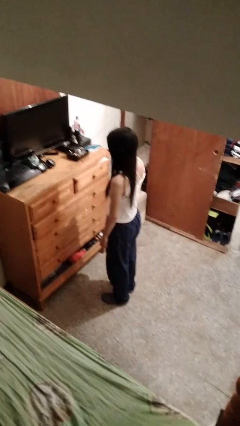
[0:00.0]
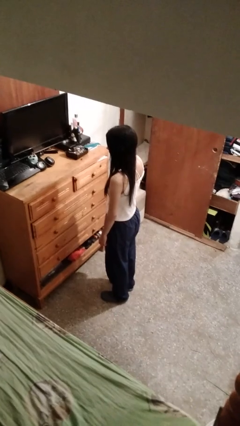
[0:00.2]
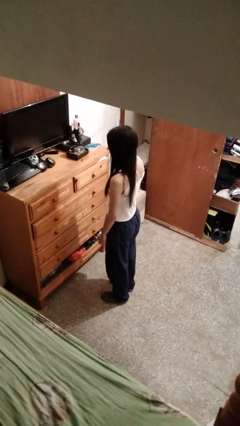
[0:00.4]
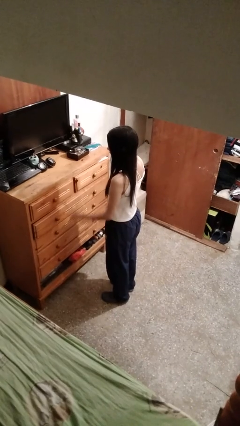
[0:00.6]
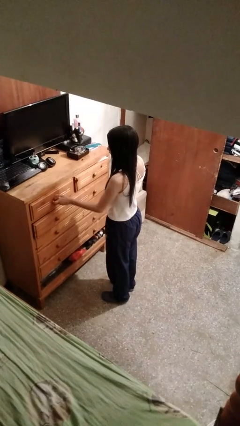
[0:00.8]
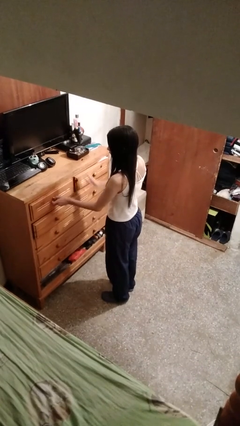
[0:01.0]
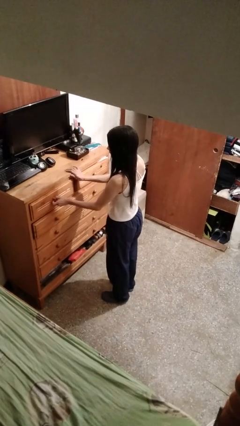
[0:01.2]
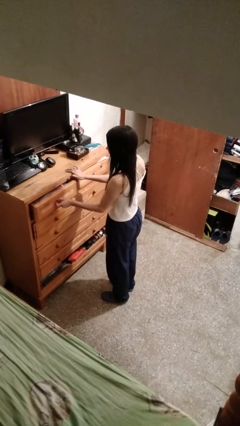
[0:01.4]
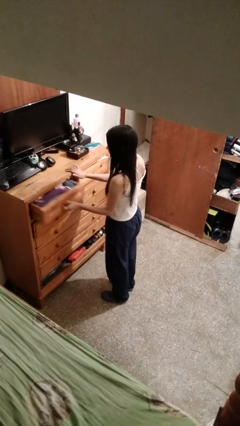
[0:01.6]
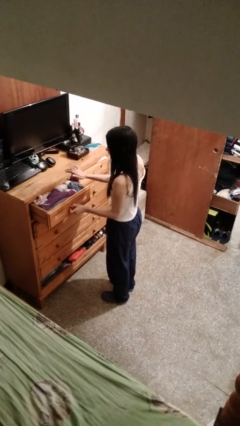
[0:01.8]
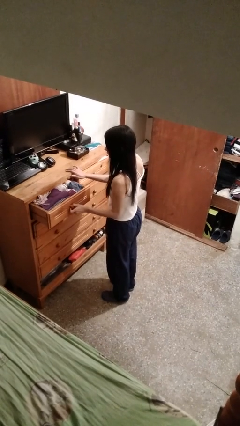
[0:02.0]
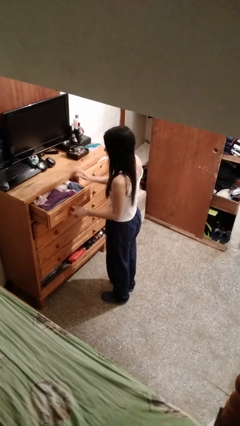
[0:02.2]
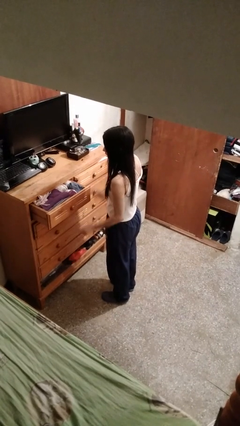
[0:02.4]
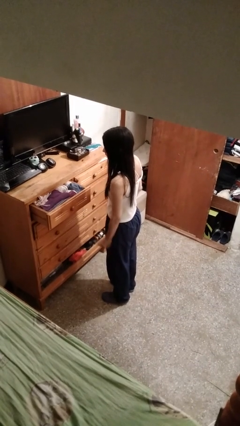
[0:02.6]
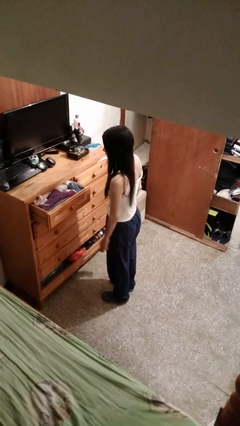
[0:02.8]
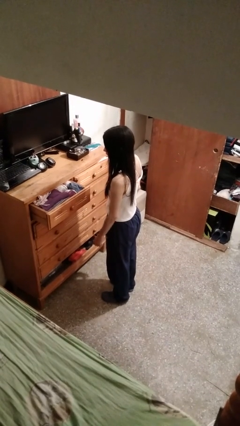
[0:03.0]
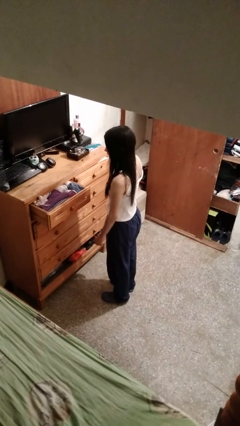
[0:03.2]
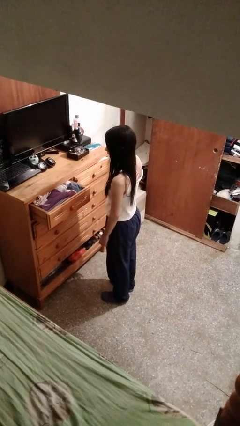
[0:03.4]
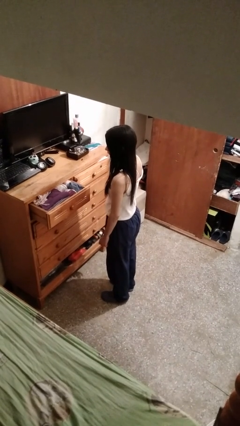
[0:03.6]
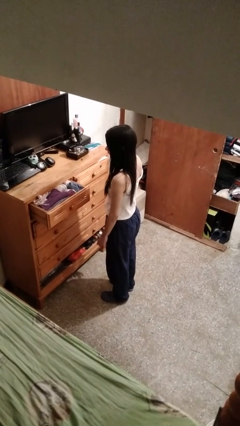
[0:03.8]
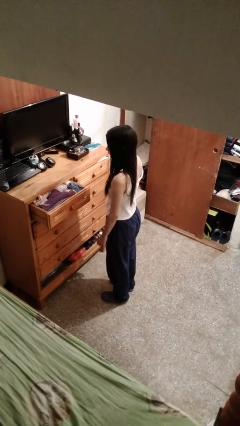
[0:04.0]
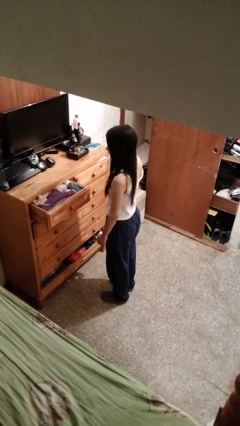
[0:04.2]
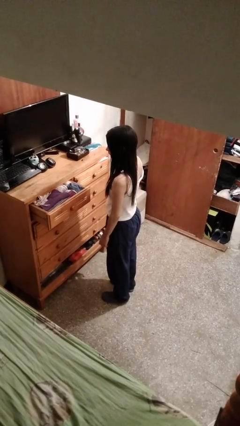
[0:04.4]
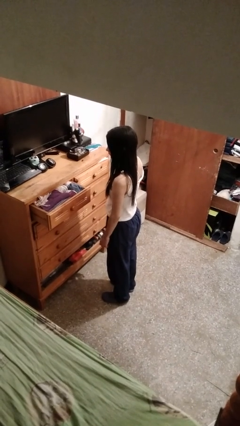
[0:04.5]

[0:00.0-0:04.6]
person opens dresser drawer

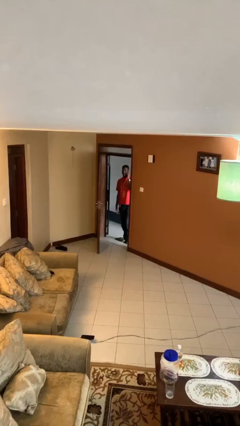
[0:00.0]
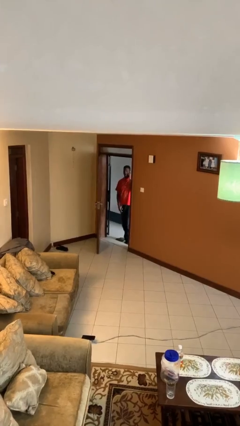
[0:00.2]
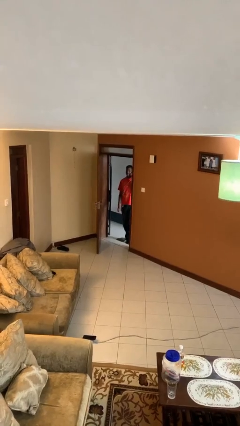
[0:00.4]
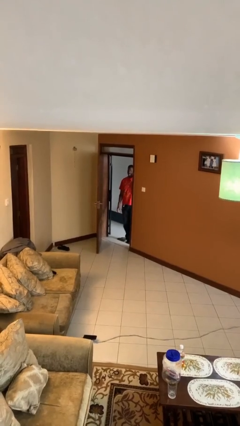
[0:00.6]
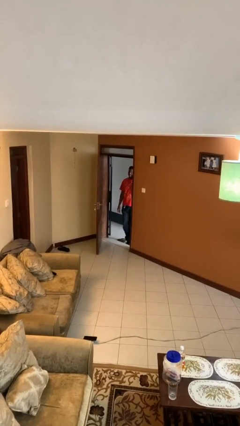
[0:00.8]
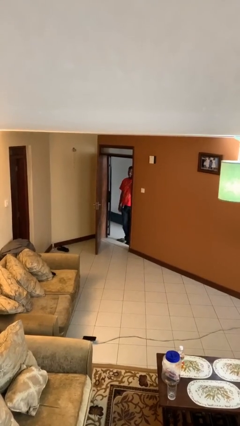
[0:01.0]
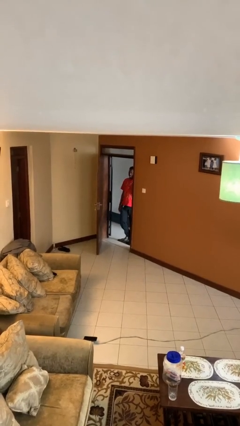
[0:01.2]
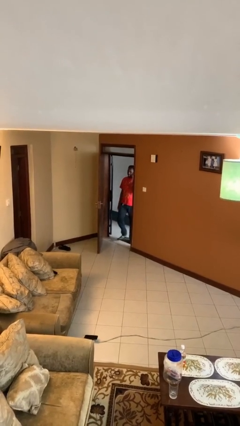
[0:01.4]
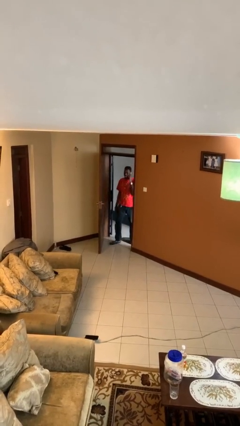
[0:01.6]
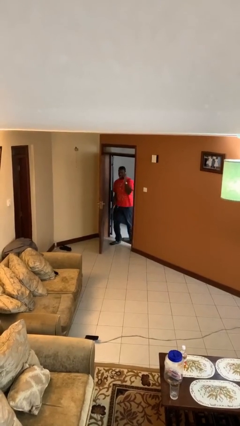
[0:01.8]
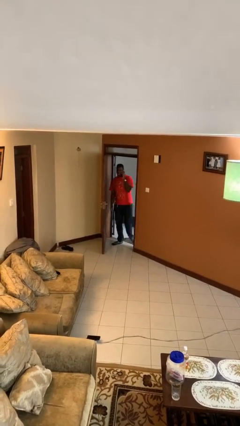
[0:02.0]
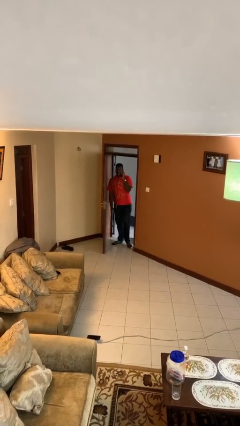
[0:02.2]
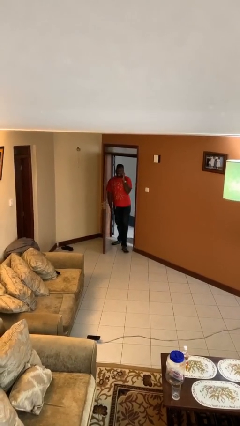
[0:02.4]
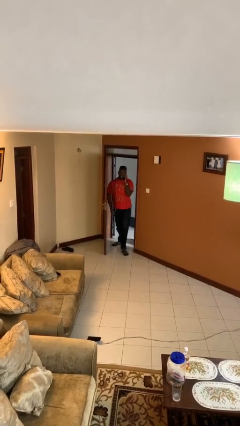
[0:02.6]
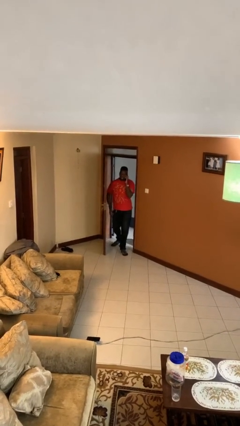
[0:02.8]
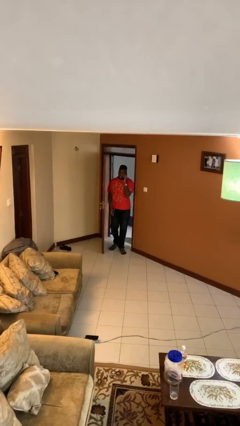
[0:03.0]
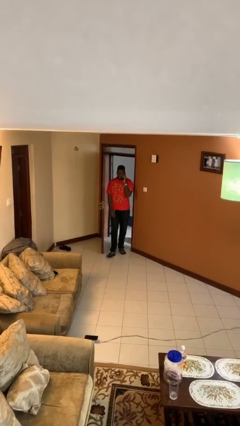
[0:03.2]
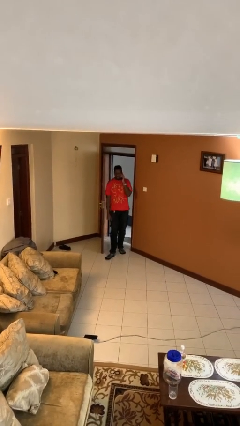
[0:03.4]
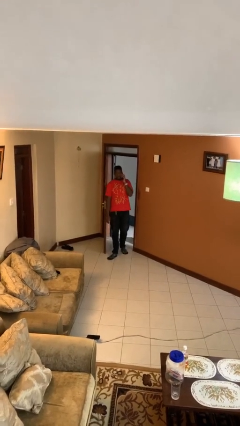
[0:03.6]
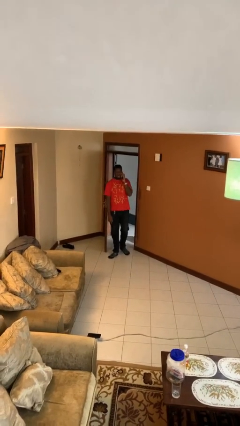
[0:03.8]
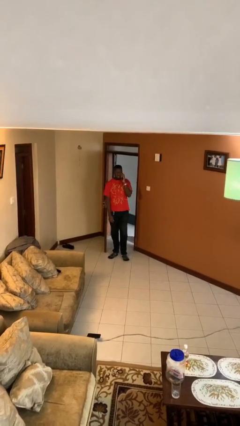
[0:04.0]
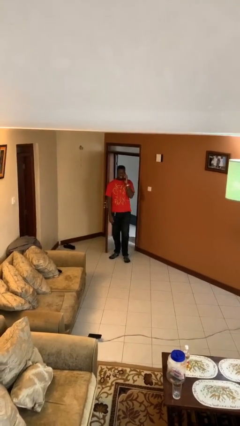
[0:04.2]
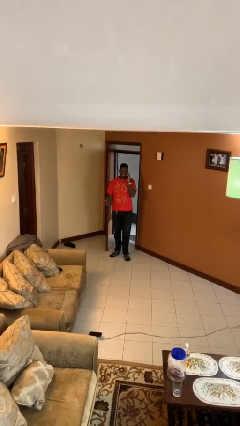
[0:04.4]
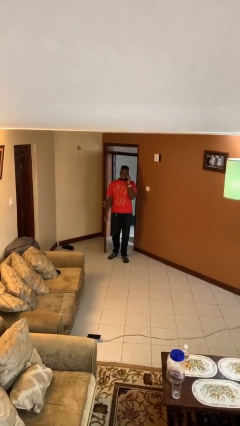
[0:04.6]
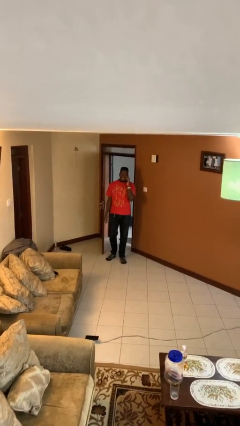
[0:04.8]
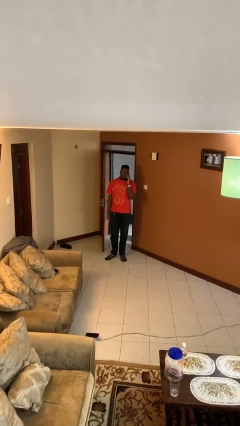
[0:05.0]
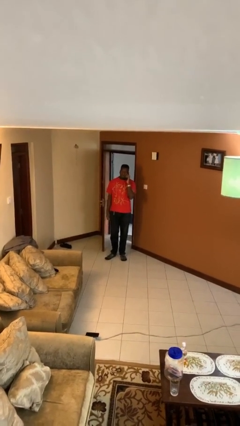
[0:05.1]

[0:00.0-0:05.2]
person enters scene through structure

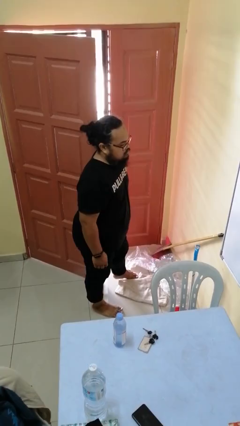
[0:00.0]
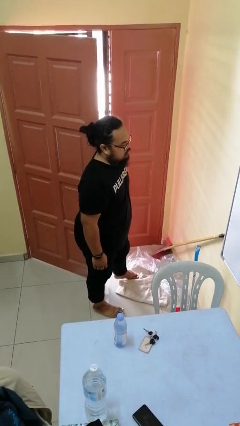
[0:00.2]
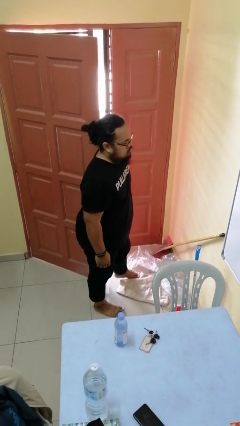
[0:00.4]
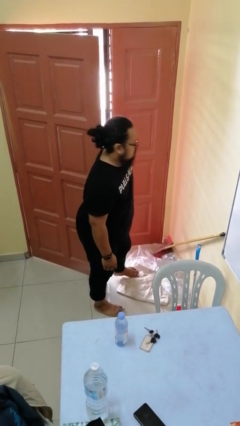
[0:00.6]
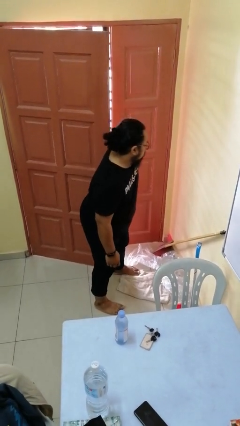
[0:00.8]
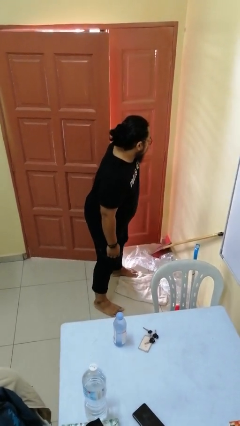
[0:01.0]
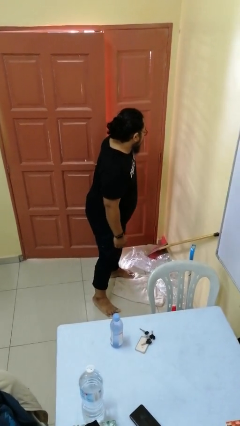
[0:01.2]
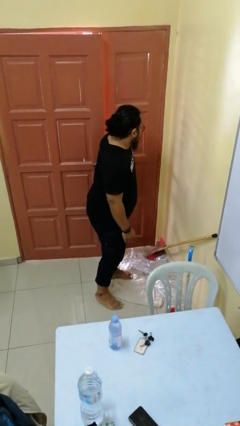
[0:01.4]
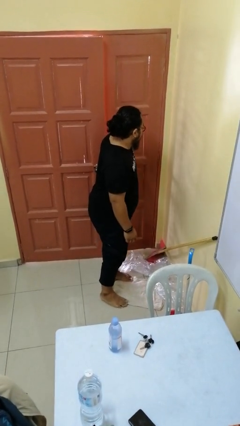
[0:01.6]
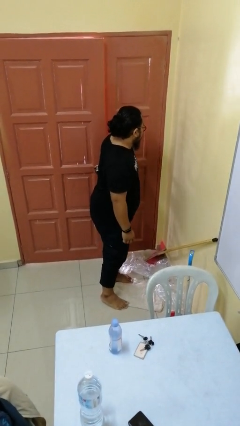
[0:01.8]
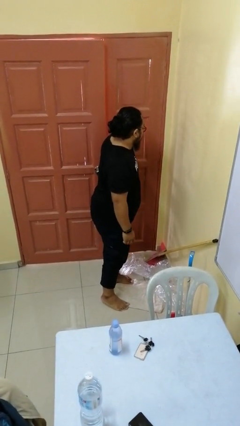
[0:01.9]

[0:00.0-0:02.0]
person closes door with hip

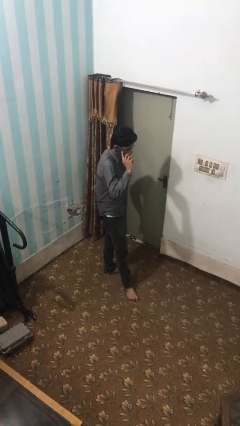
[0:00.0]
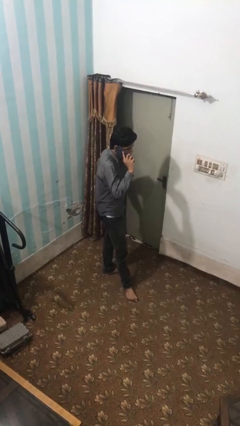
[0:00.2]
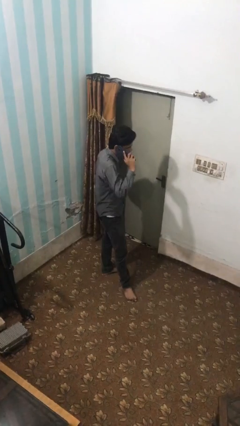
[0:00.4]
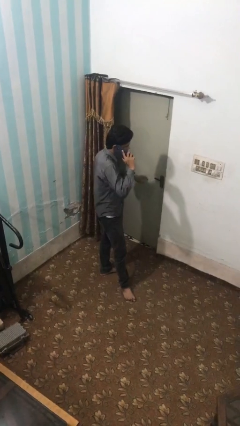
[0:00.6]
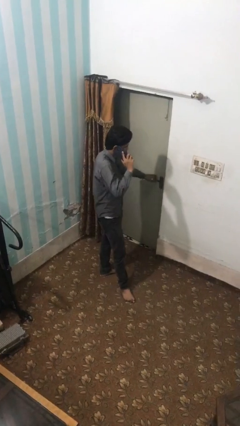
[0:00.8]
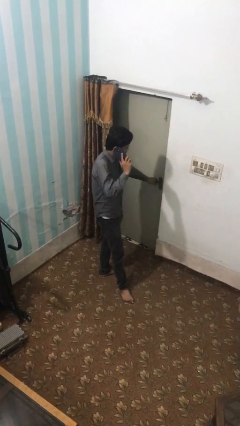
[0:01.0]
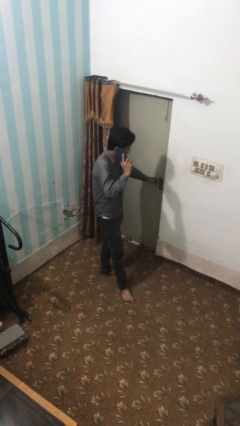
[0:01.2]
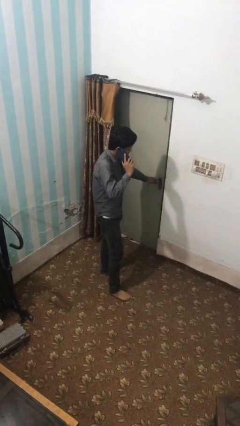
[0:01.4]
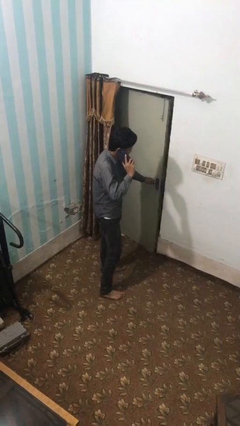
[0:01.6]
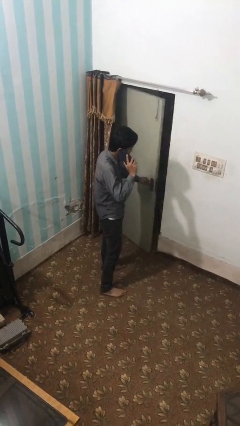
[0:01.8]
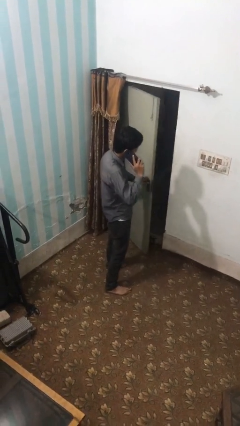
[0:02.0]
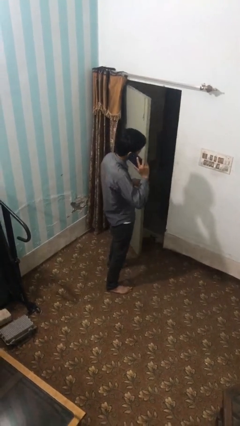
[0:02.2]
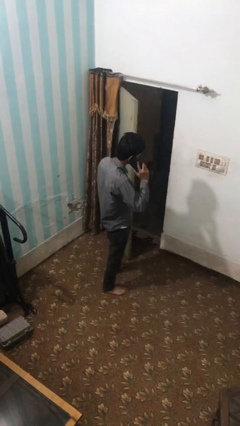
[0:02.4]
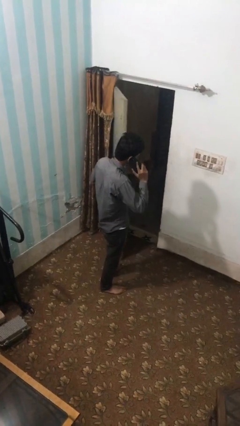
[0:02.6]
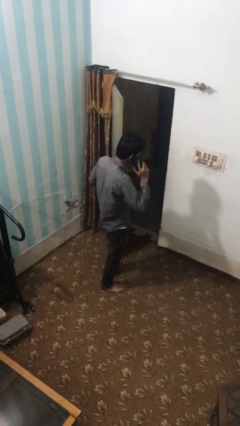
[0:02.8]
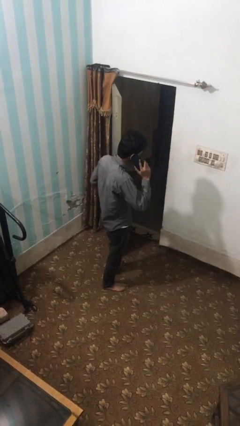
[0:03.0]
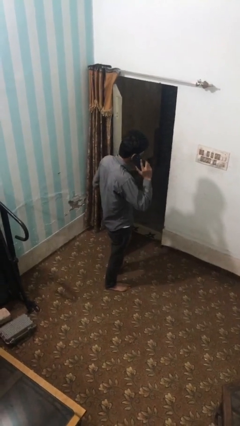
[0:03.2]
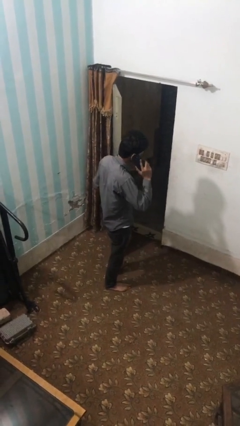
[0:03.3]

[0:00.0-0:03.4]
person opens facility door

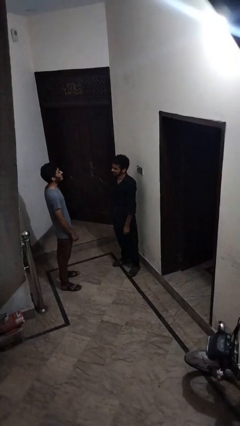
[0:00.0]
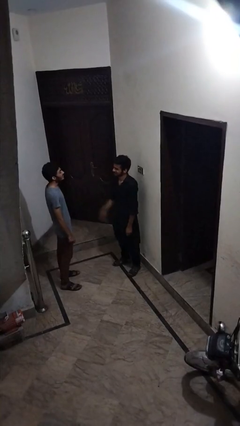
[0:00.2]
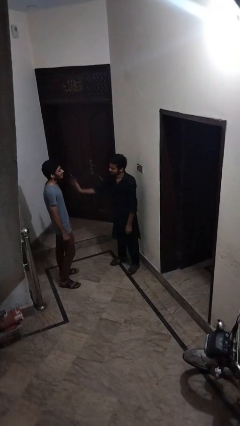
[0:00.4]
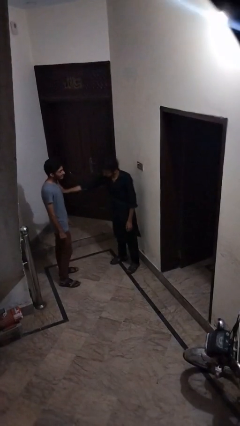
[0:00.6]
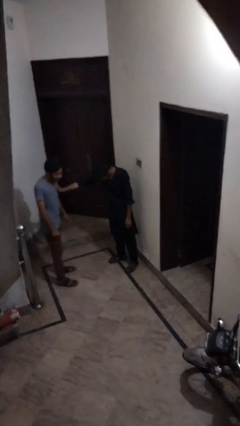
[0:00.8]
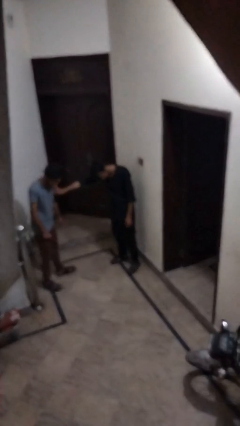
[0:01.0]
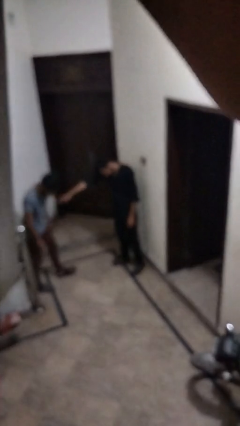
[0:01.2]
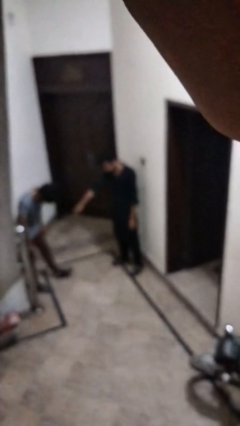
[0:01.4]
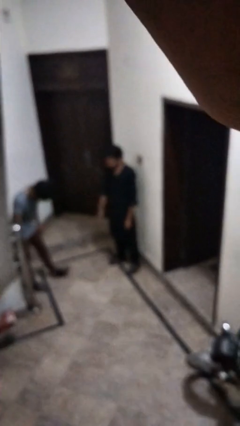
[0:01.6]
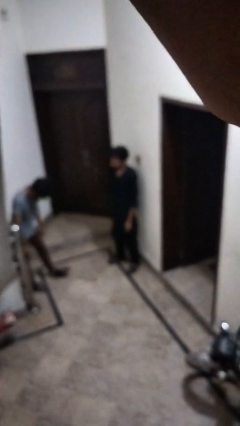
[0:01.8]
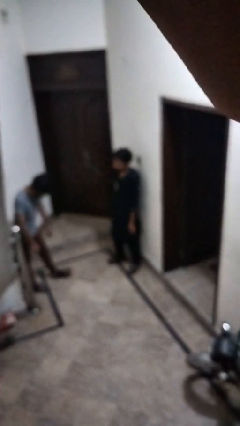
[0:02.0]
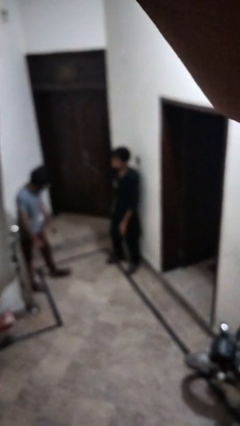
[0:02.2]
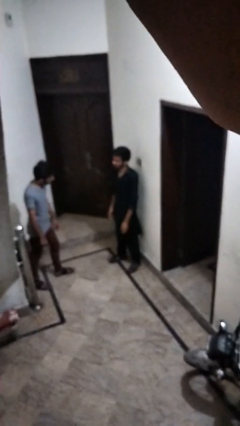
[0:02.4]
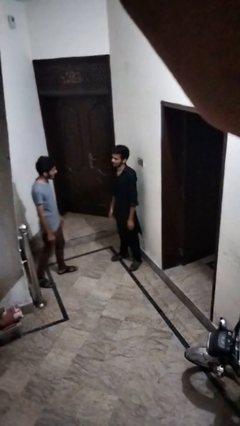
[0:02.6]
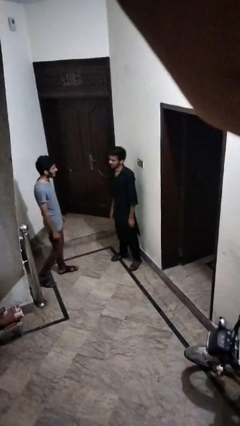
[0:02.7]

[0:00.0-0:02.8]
person shoves person
